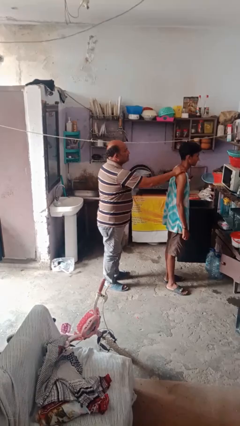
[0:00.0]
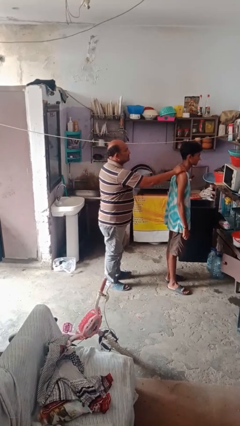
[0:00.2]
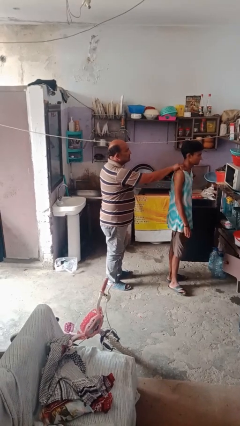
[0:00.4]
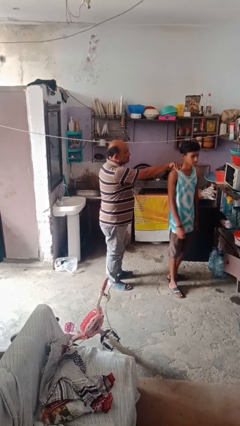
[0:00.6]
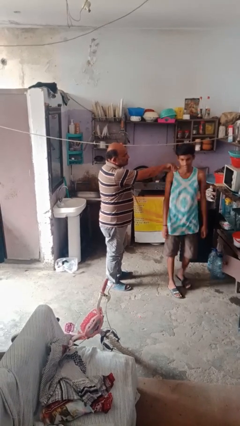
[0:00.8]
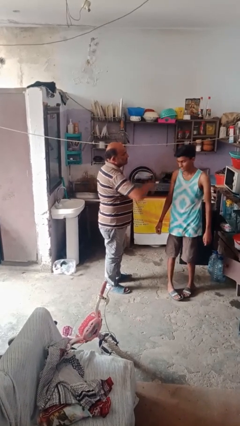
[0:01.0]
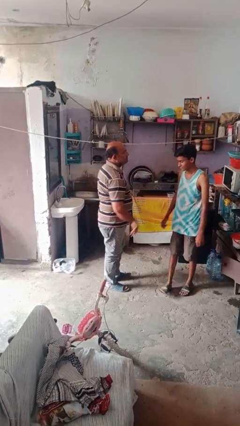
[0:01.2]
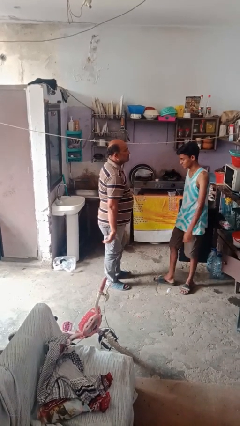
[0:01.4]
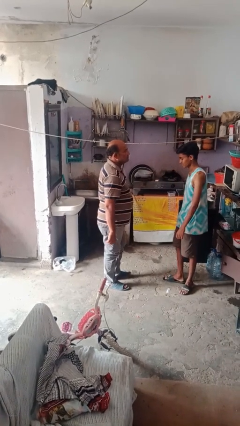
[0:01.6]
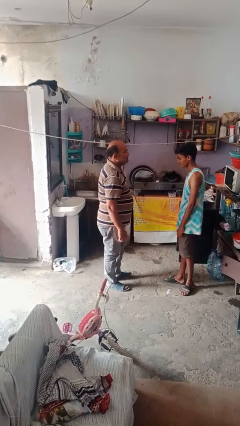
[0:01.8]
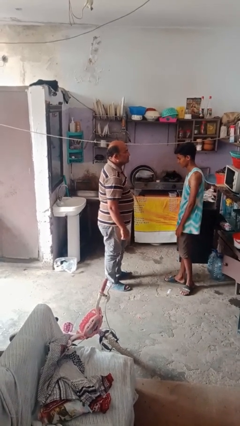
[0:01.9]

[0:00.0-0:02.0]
person spins person around

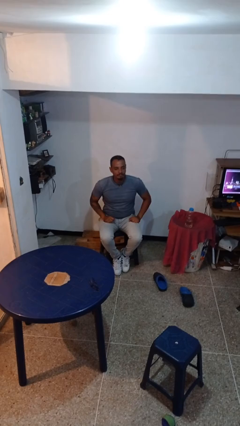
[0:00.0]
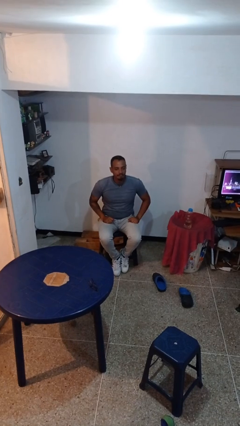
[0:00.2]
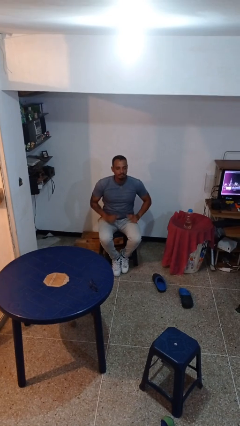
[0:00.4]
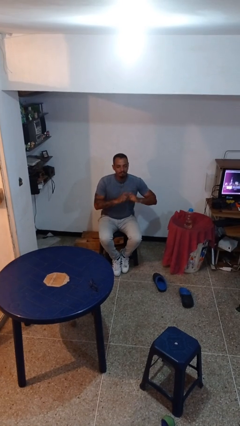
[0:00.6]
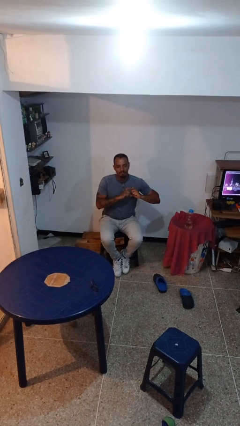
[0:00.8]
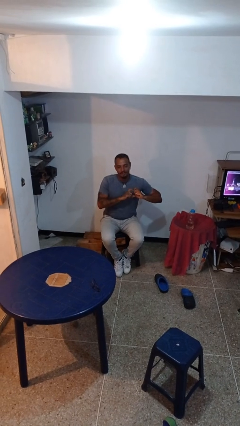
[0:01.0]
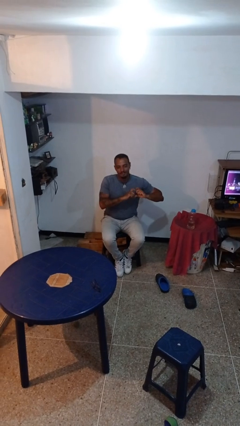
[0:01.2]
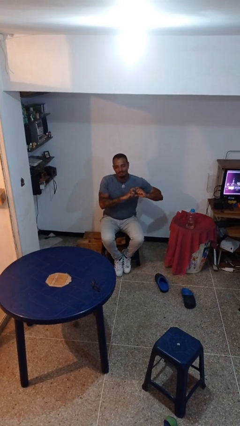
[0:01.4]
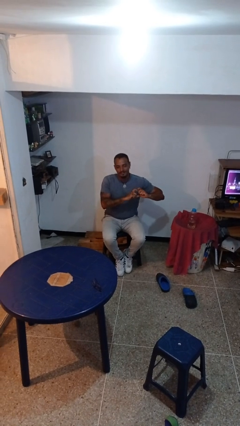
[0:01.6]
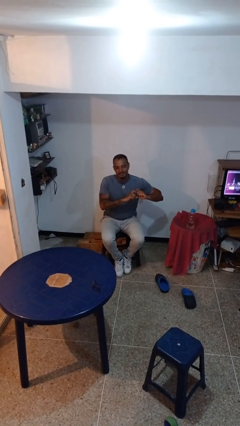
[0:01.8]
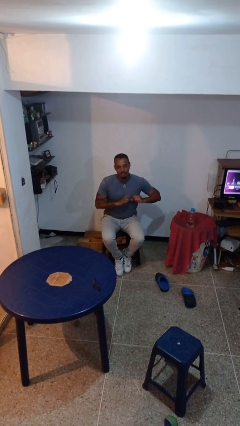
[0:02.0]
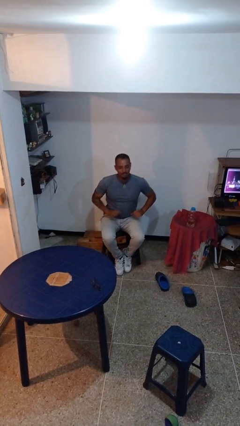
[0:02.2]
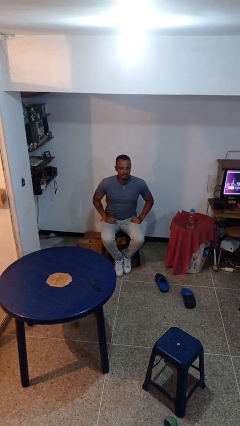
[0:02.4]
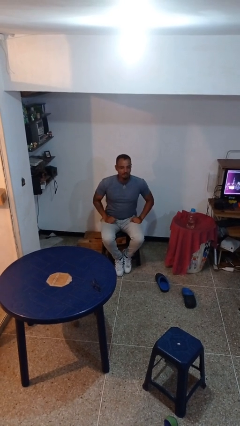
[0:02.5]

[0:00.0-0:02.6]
person gestures heart

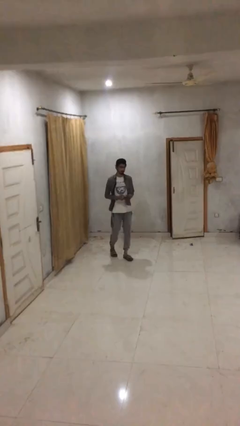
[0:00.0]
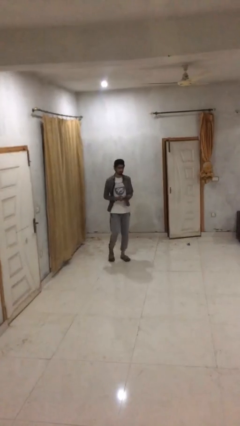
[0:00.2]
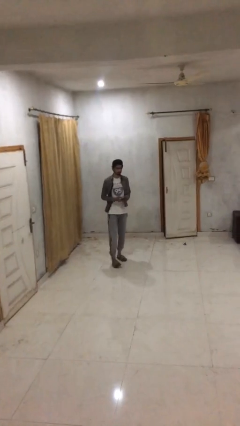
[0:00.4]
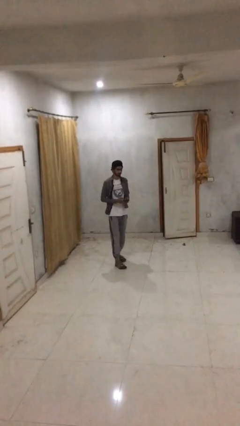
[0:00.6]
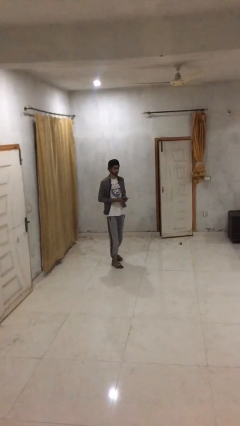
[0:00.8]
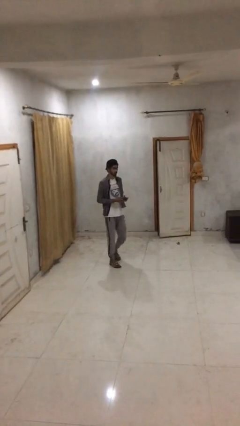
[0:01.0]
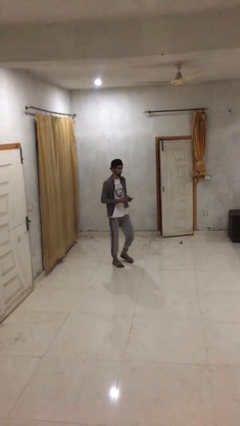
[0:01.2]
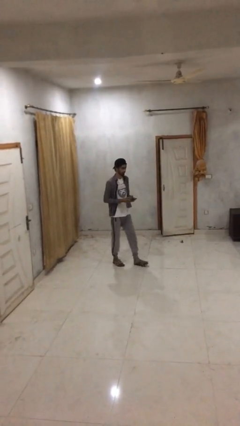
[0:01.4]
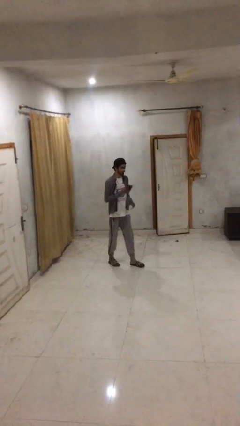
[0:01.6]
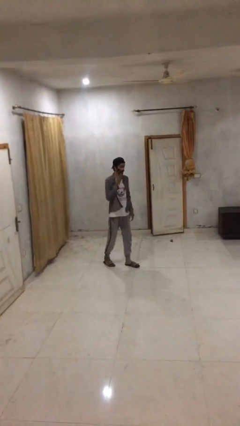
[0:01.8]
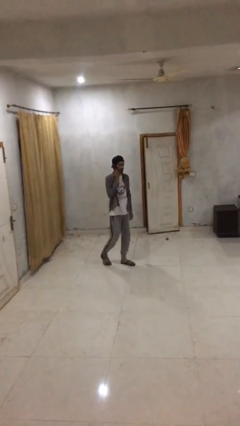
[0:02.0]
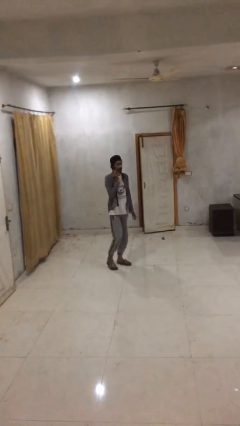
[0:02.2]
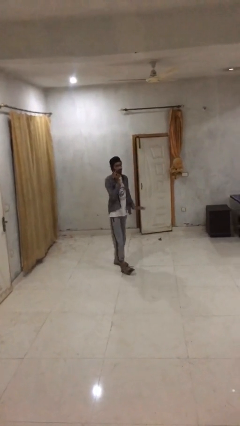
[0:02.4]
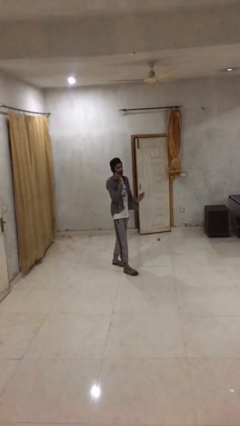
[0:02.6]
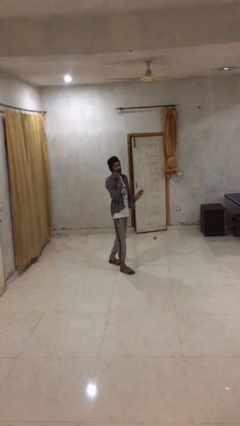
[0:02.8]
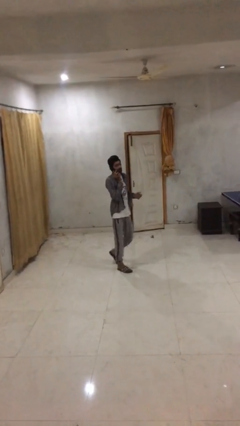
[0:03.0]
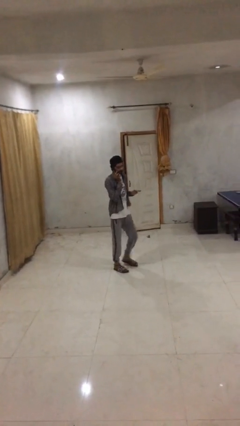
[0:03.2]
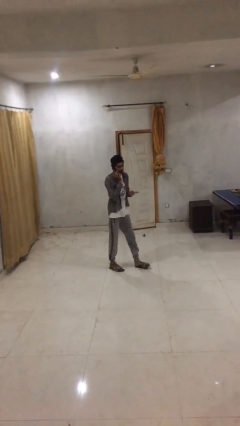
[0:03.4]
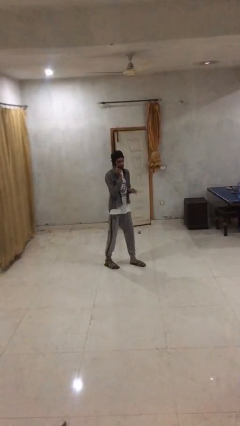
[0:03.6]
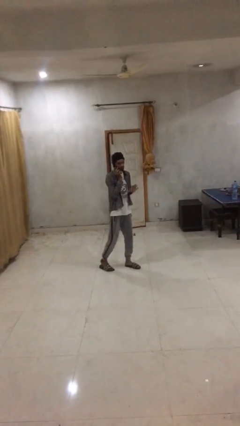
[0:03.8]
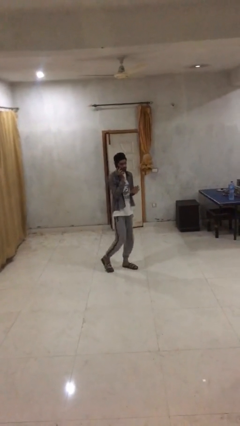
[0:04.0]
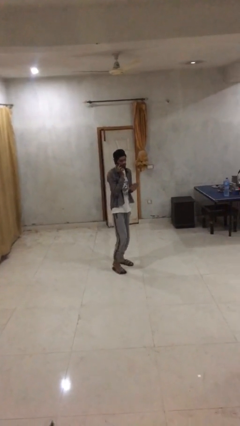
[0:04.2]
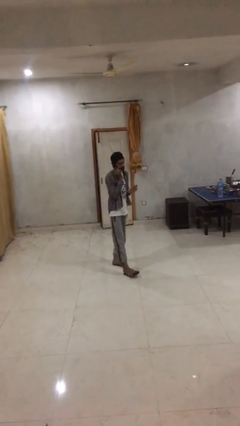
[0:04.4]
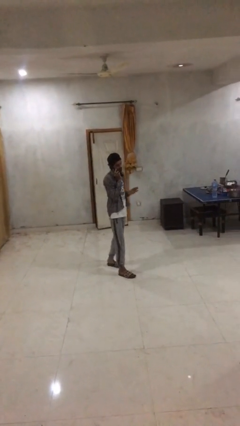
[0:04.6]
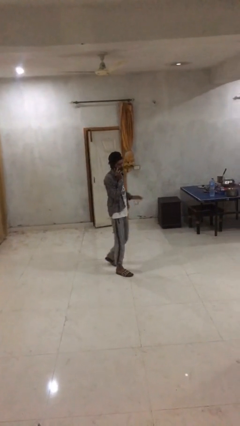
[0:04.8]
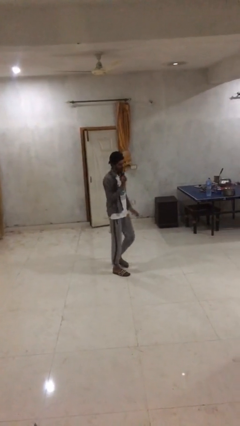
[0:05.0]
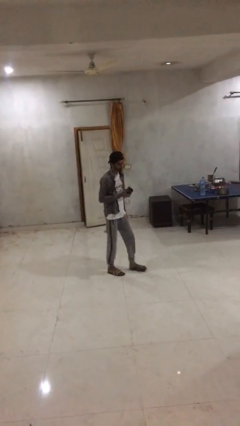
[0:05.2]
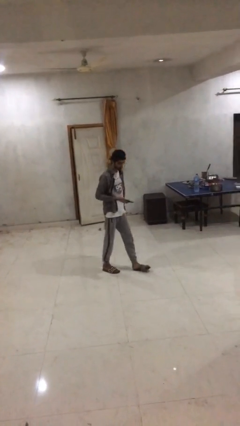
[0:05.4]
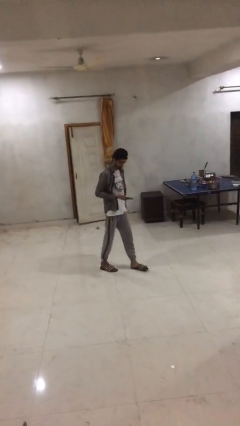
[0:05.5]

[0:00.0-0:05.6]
person talks on phone

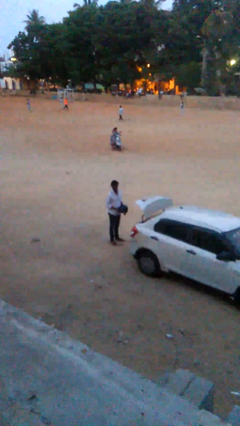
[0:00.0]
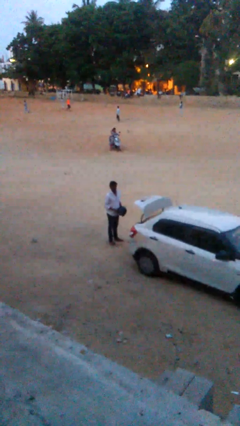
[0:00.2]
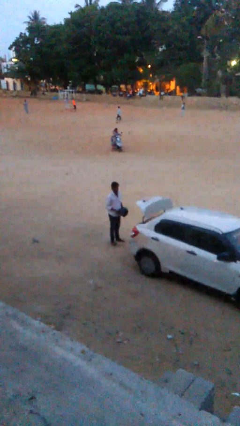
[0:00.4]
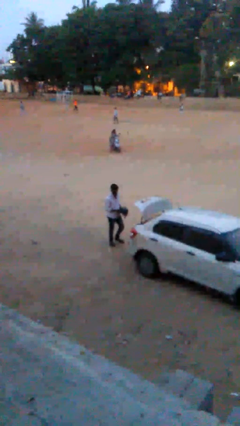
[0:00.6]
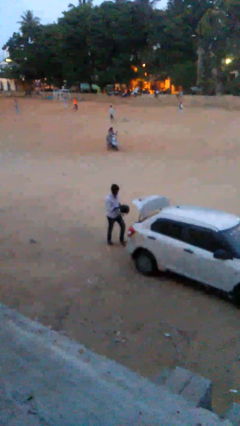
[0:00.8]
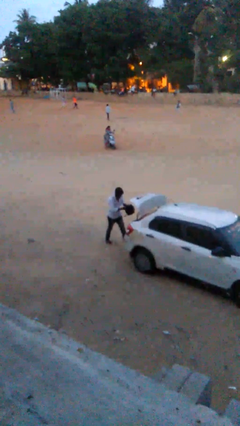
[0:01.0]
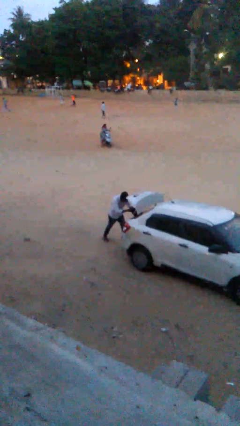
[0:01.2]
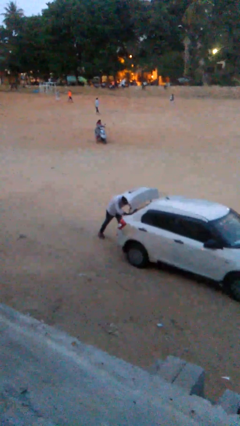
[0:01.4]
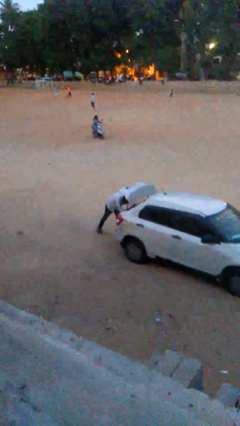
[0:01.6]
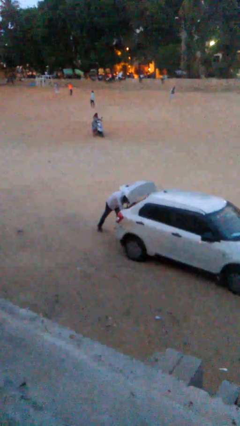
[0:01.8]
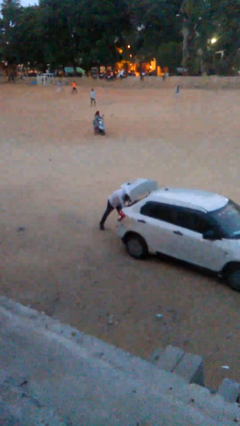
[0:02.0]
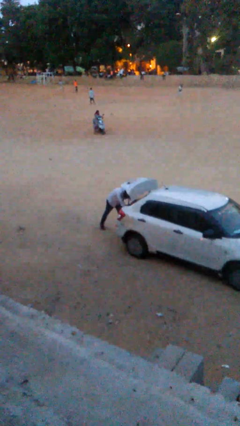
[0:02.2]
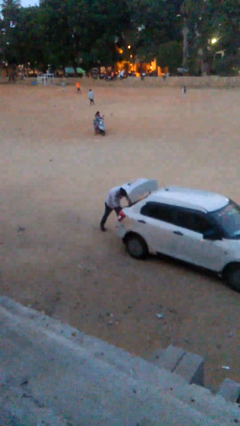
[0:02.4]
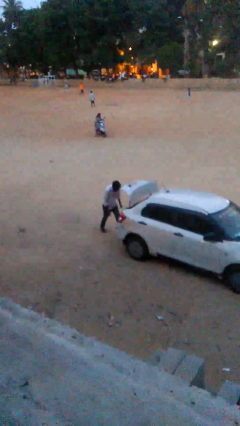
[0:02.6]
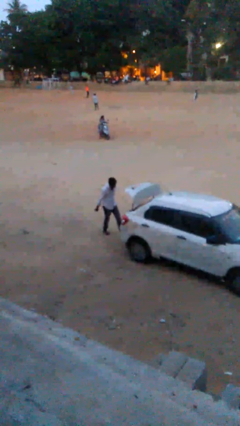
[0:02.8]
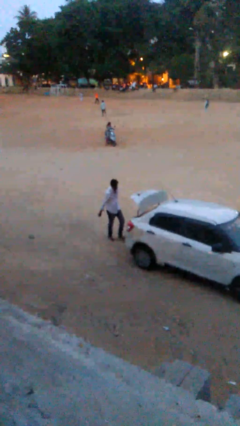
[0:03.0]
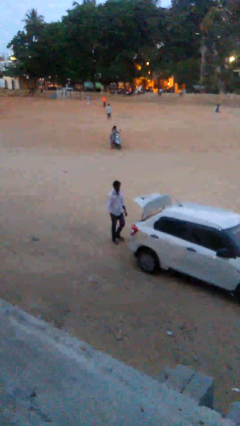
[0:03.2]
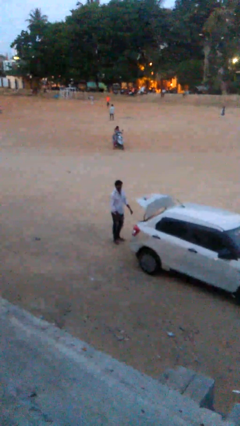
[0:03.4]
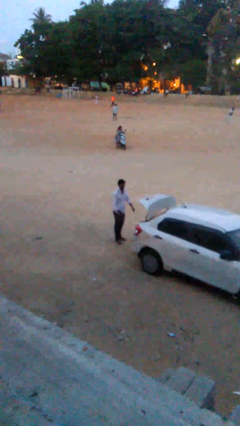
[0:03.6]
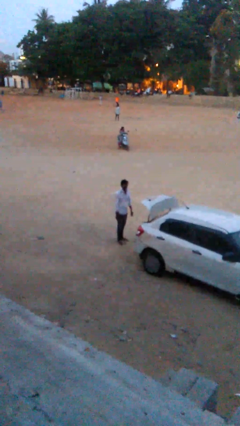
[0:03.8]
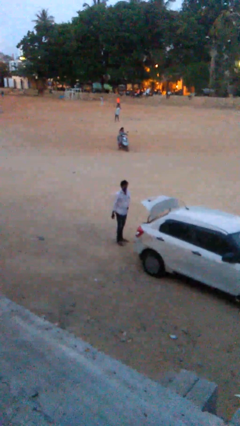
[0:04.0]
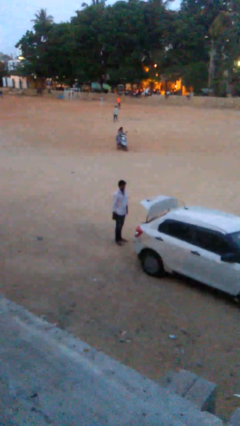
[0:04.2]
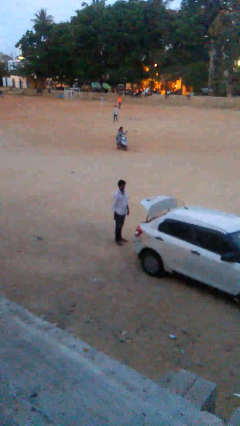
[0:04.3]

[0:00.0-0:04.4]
person loads car

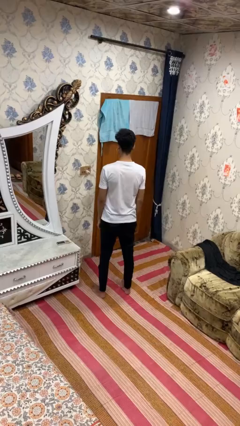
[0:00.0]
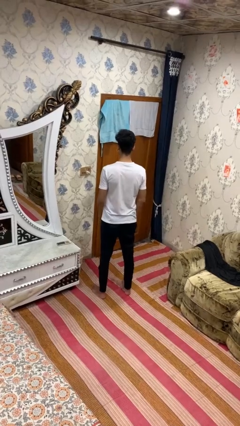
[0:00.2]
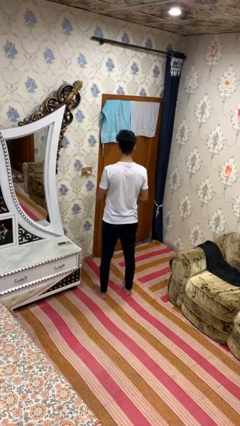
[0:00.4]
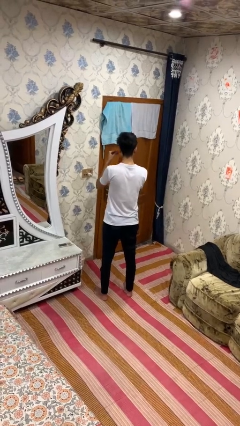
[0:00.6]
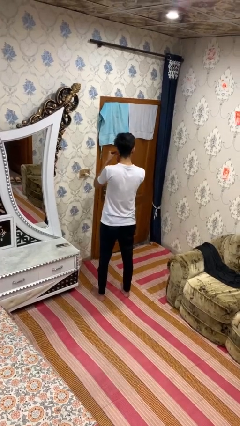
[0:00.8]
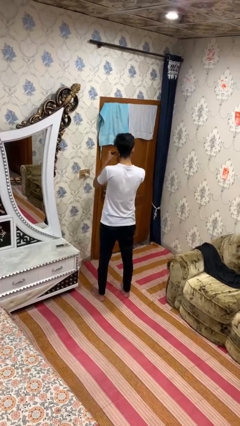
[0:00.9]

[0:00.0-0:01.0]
person takes off earrings

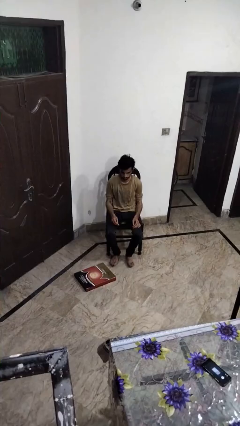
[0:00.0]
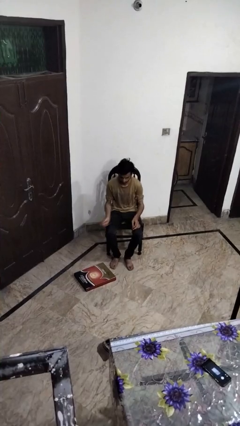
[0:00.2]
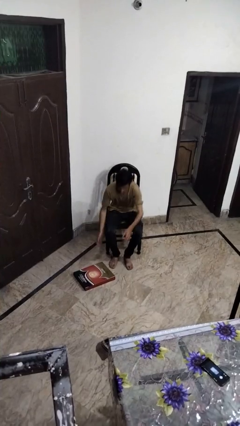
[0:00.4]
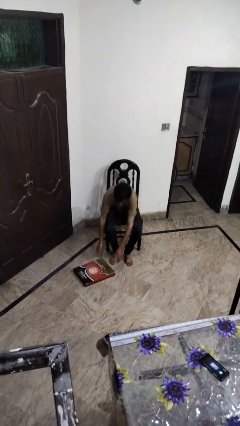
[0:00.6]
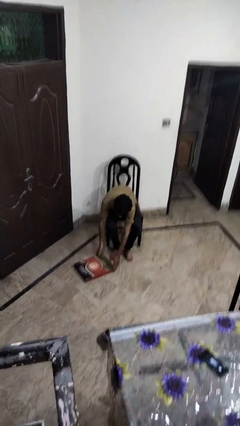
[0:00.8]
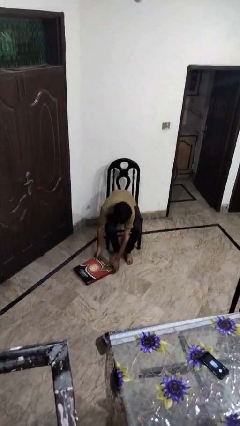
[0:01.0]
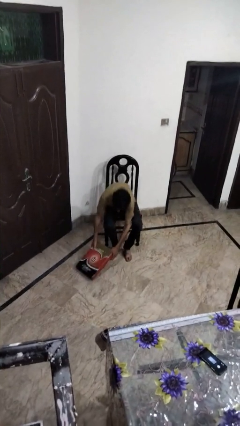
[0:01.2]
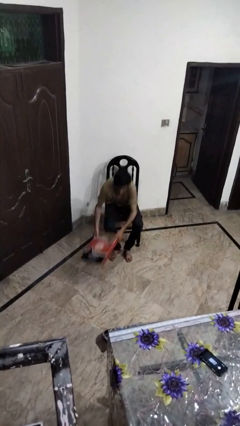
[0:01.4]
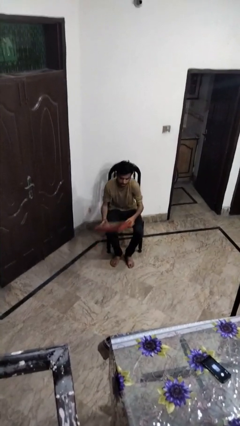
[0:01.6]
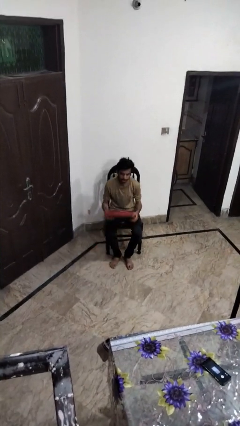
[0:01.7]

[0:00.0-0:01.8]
person picks up object from floor
